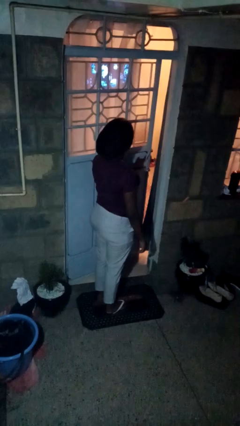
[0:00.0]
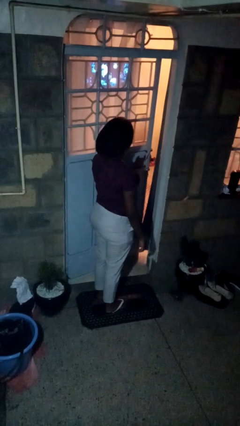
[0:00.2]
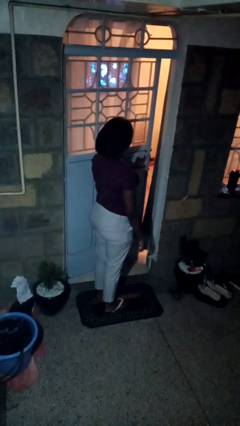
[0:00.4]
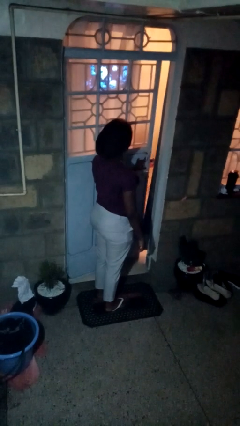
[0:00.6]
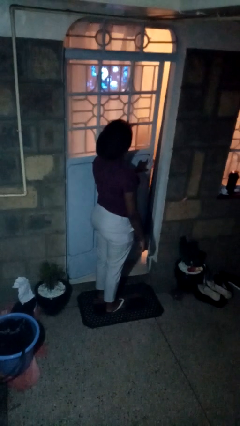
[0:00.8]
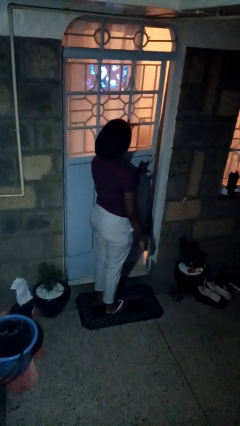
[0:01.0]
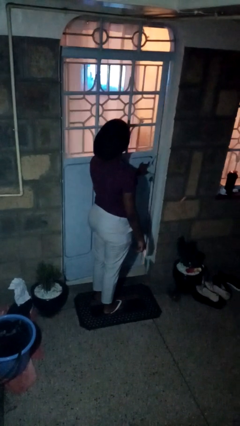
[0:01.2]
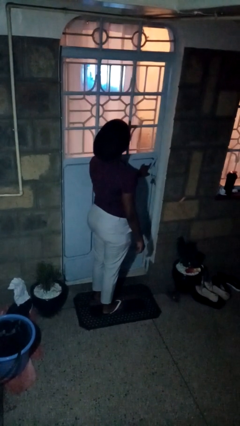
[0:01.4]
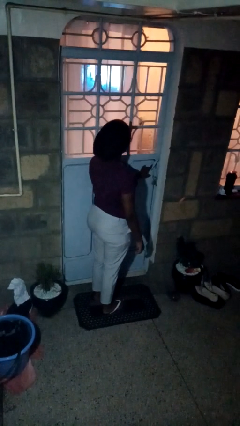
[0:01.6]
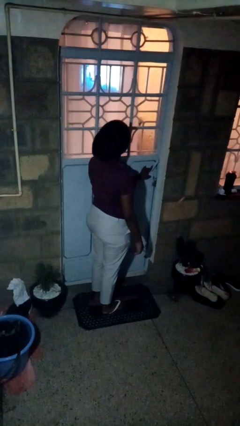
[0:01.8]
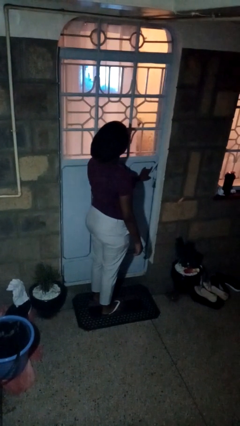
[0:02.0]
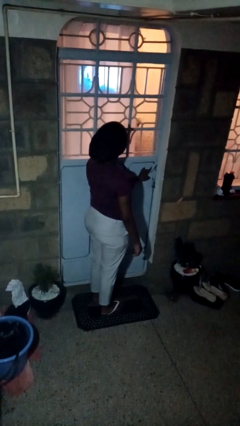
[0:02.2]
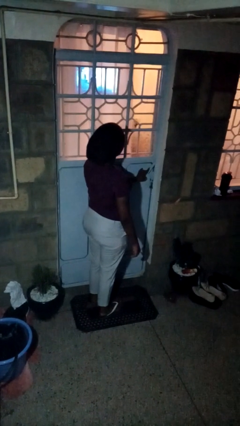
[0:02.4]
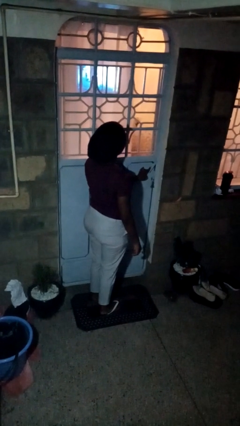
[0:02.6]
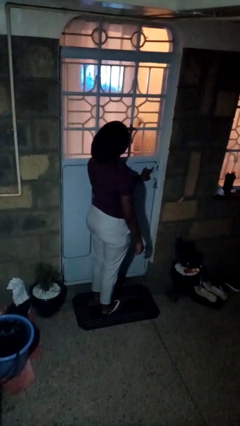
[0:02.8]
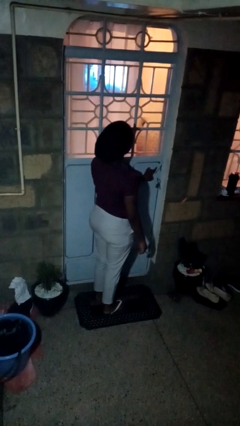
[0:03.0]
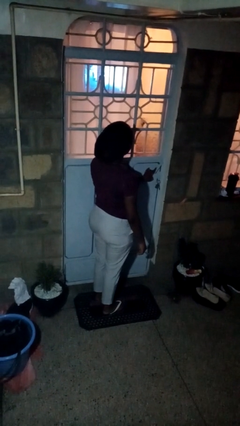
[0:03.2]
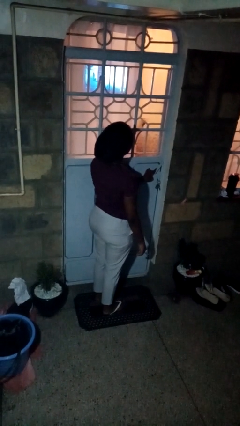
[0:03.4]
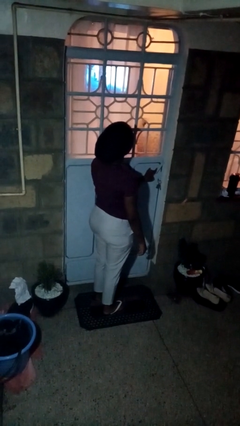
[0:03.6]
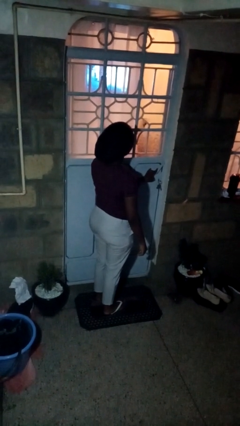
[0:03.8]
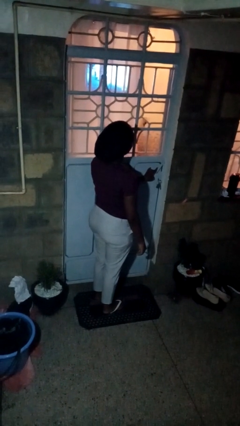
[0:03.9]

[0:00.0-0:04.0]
person closes facility door

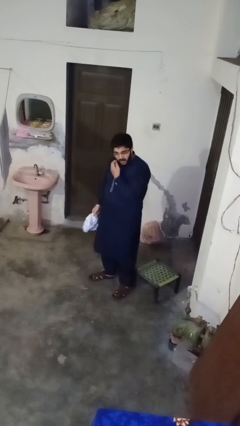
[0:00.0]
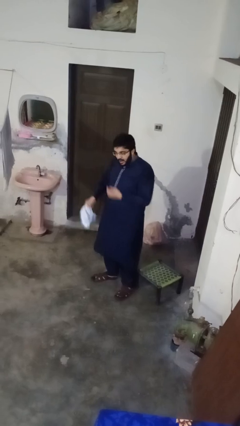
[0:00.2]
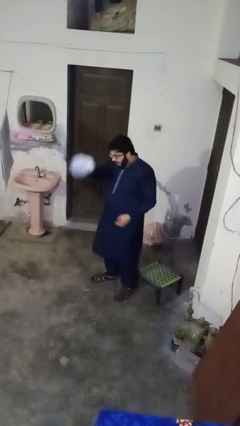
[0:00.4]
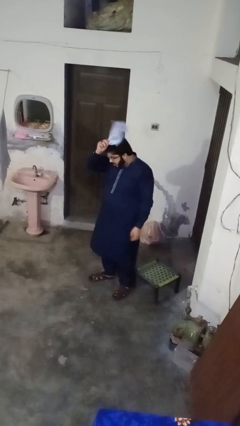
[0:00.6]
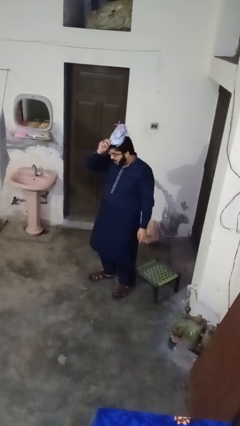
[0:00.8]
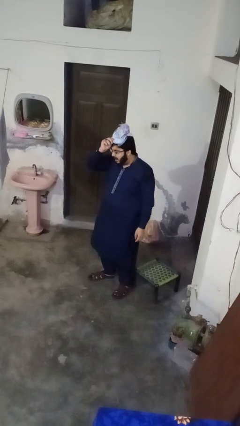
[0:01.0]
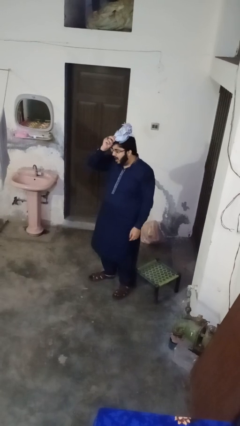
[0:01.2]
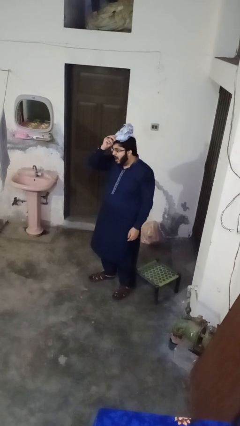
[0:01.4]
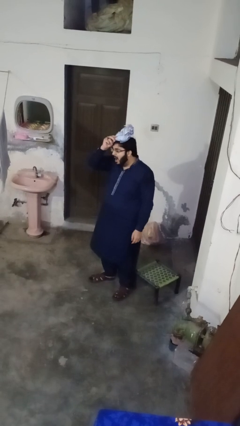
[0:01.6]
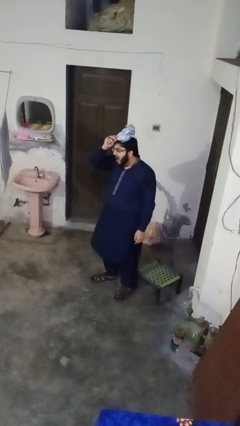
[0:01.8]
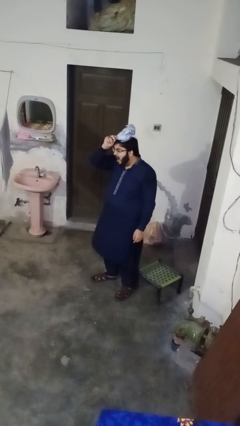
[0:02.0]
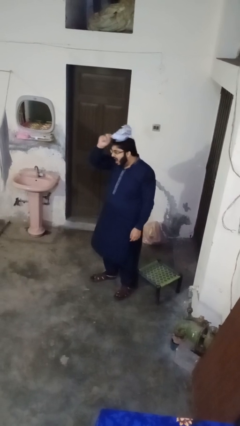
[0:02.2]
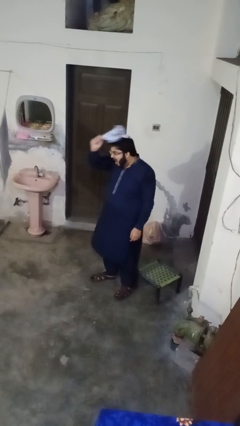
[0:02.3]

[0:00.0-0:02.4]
person puts on hat

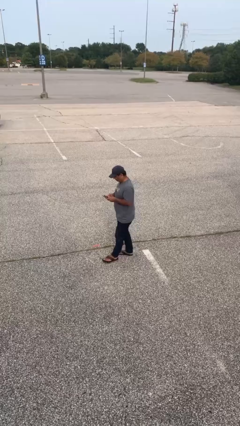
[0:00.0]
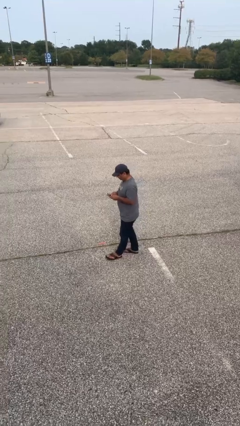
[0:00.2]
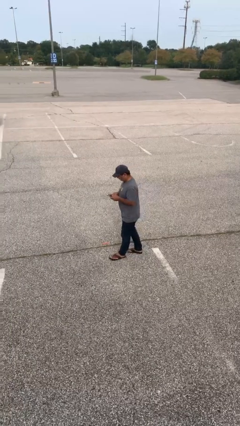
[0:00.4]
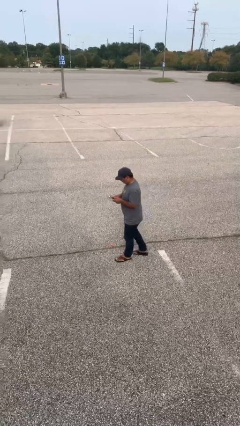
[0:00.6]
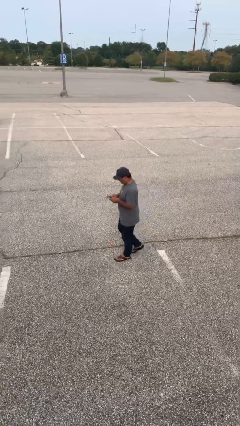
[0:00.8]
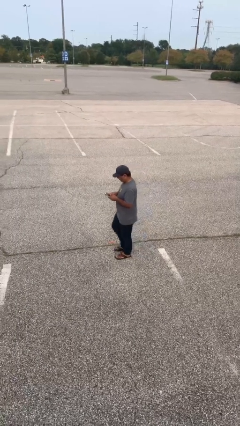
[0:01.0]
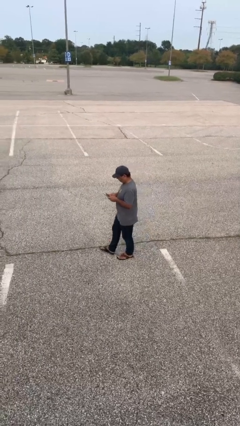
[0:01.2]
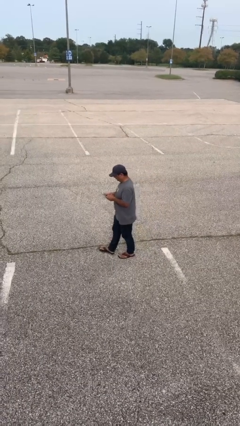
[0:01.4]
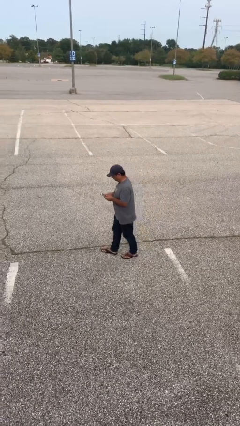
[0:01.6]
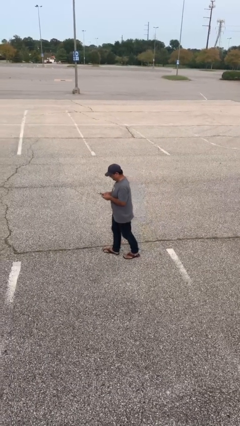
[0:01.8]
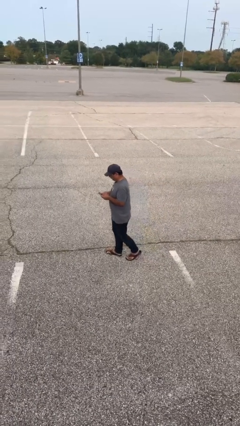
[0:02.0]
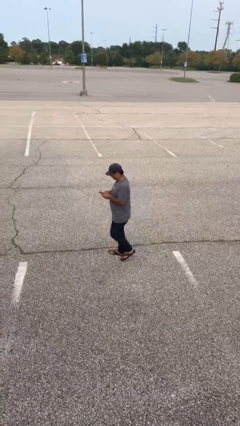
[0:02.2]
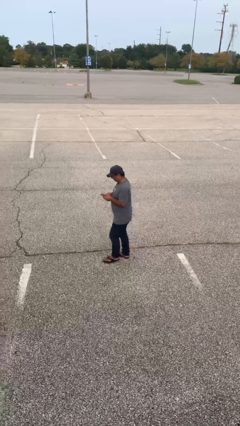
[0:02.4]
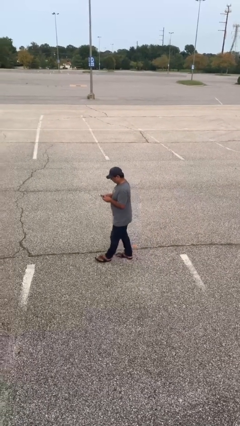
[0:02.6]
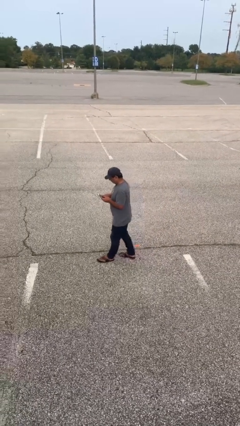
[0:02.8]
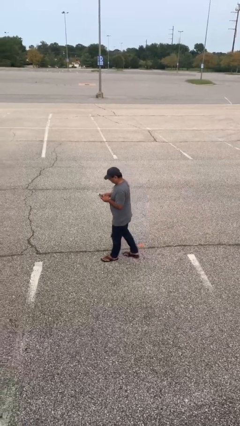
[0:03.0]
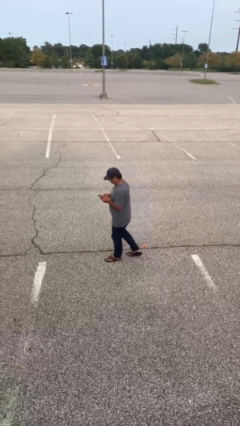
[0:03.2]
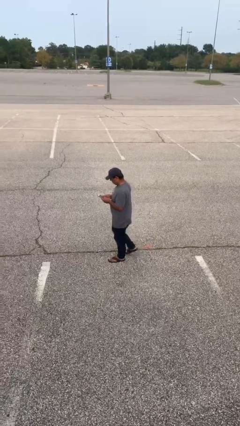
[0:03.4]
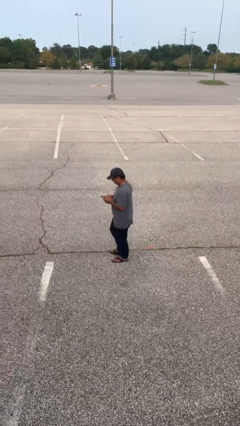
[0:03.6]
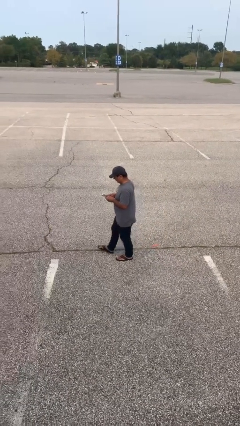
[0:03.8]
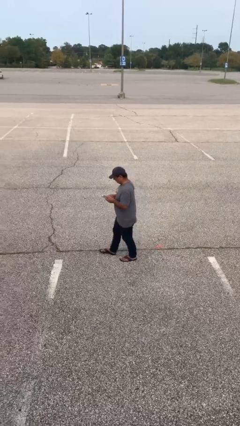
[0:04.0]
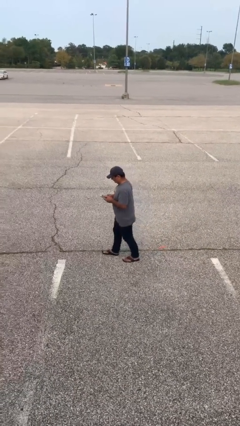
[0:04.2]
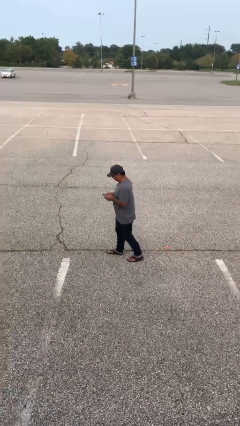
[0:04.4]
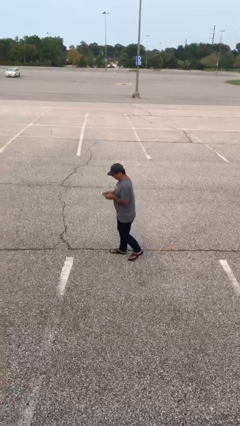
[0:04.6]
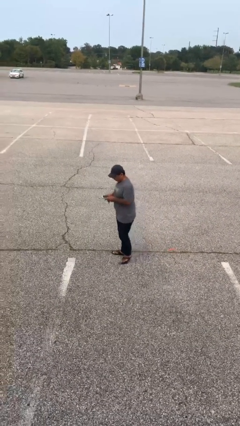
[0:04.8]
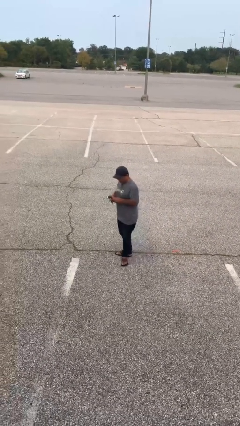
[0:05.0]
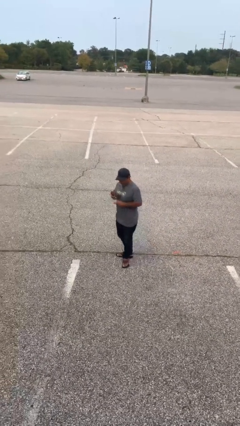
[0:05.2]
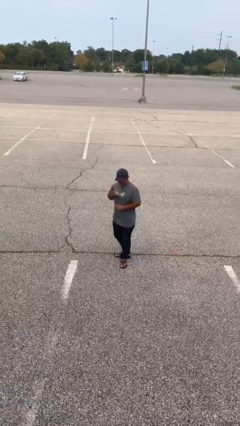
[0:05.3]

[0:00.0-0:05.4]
person texts on phone

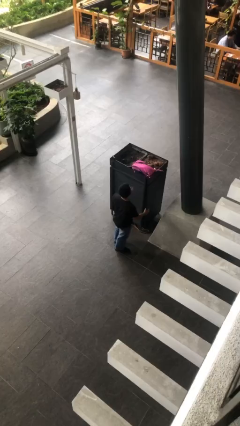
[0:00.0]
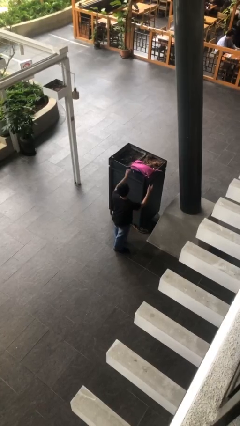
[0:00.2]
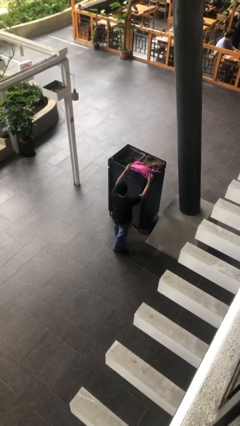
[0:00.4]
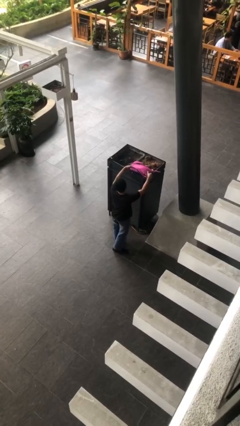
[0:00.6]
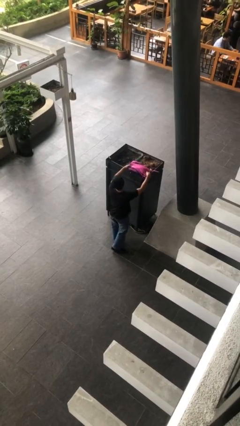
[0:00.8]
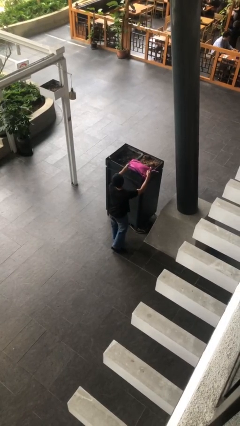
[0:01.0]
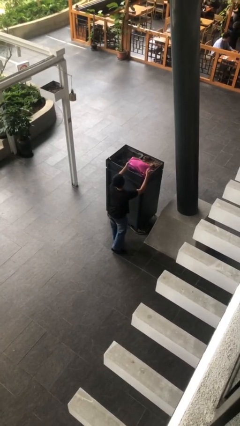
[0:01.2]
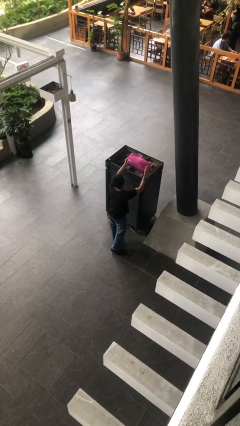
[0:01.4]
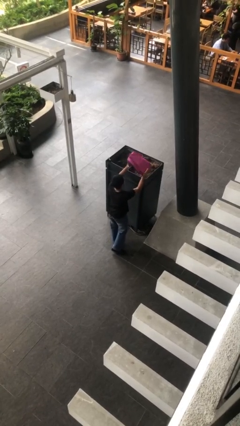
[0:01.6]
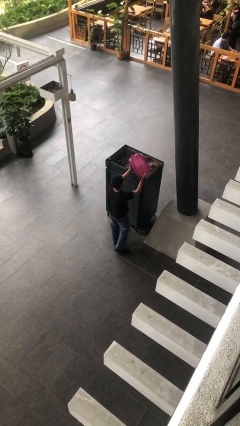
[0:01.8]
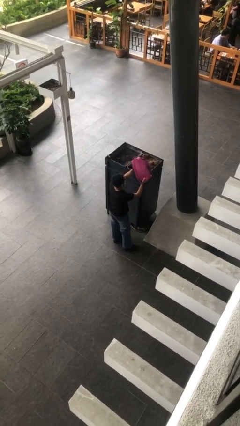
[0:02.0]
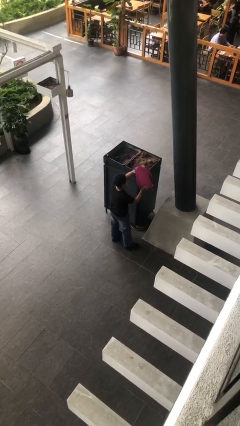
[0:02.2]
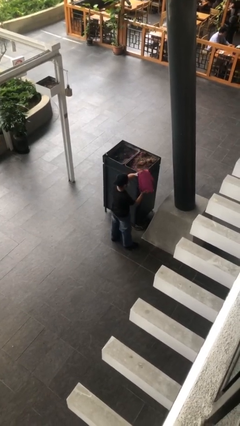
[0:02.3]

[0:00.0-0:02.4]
person picks up object from shelf

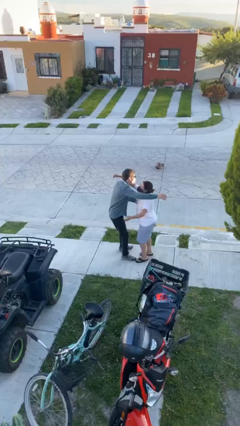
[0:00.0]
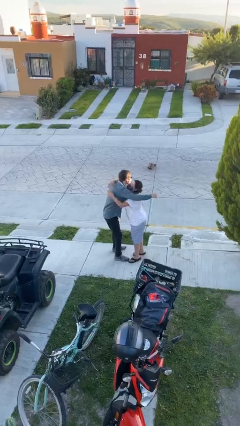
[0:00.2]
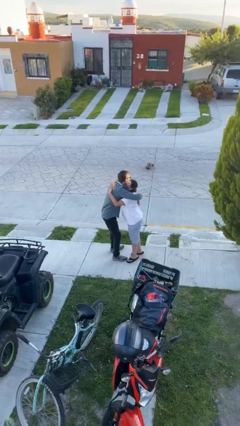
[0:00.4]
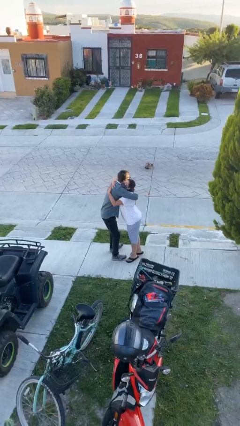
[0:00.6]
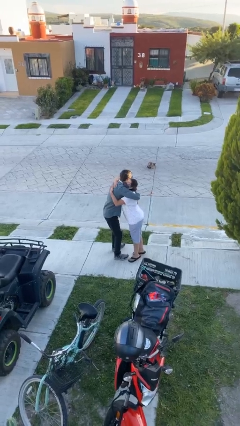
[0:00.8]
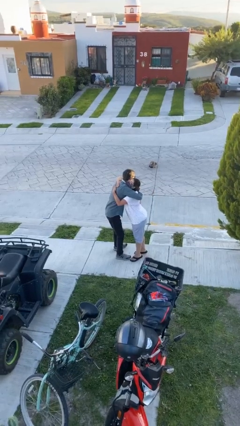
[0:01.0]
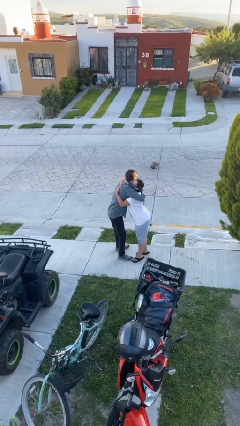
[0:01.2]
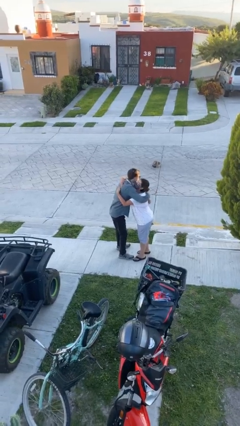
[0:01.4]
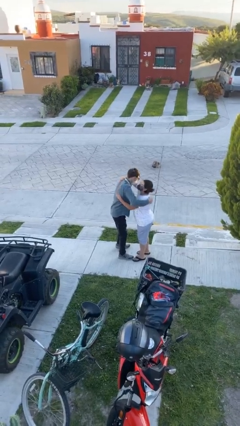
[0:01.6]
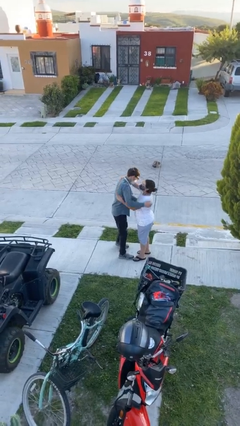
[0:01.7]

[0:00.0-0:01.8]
person embraces person

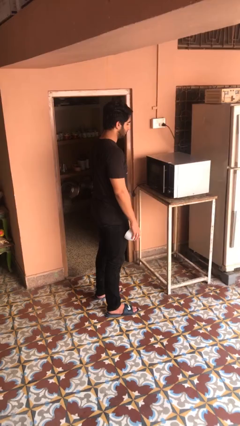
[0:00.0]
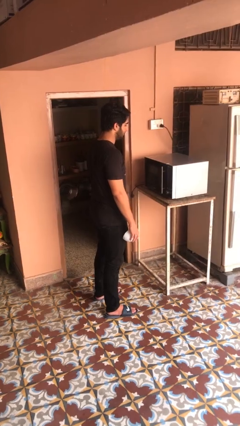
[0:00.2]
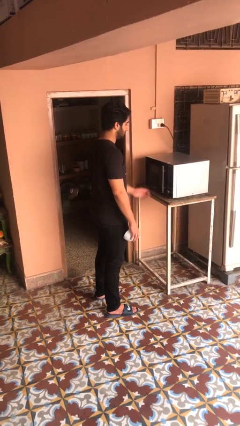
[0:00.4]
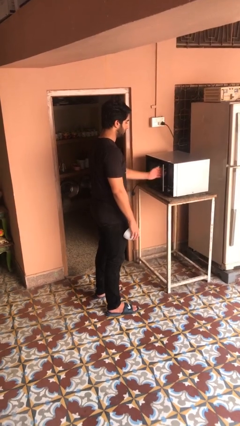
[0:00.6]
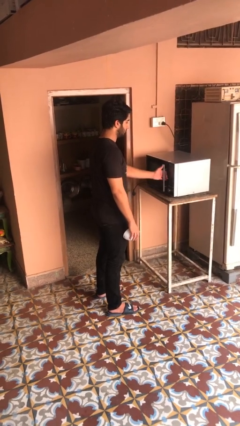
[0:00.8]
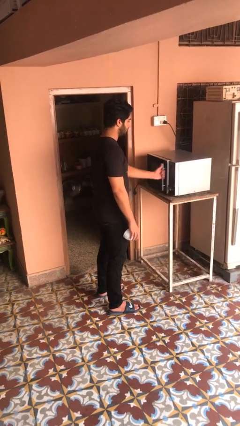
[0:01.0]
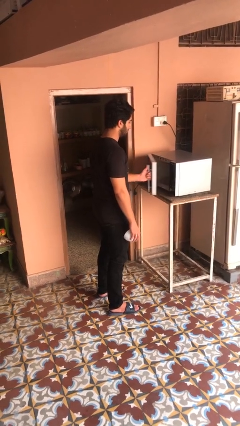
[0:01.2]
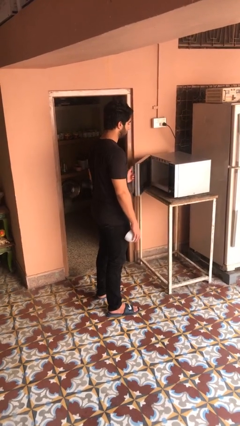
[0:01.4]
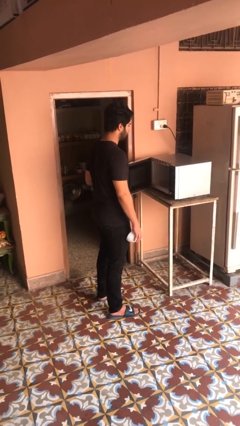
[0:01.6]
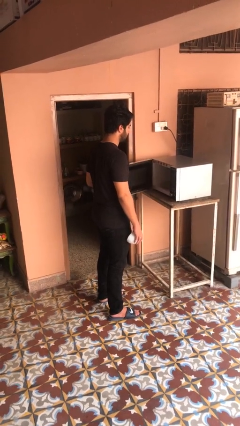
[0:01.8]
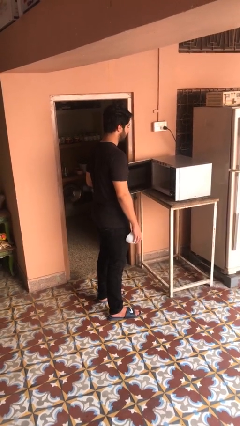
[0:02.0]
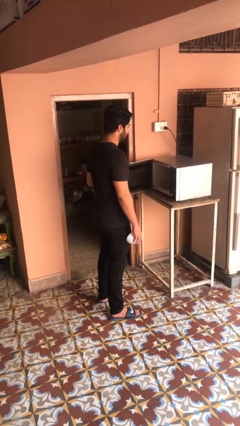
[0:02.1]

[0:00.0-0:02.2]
person opens microwave
